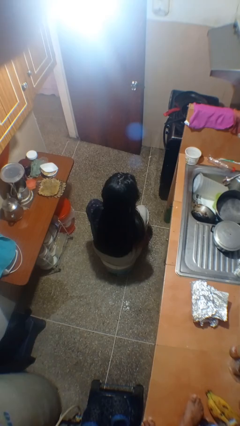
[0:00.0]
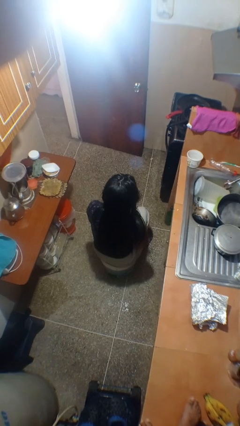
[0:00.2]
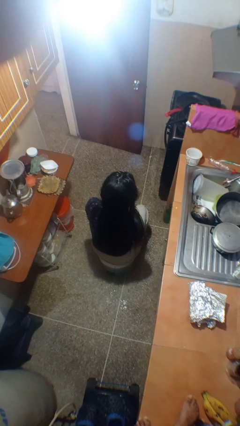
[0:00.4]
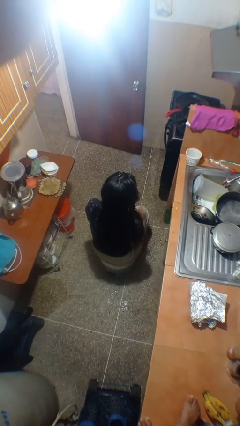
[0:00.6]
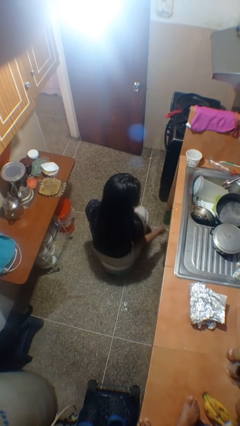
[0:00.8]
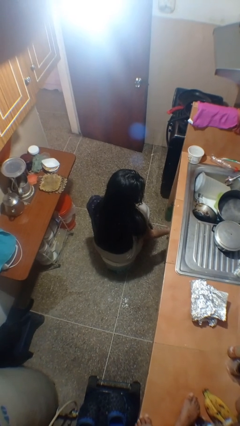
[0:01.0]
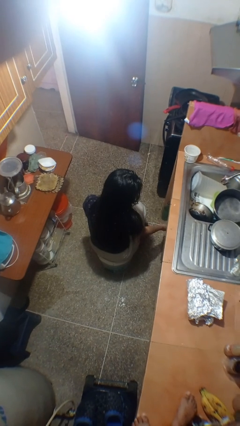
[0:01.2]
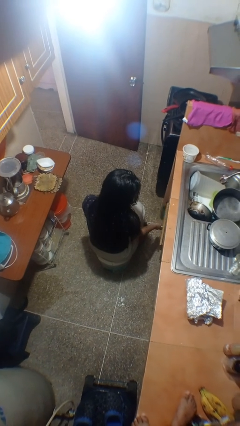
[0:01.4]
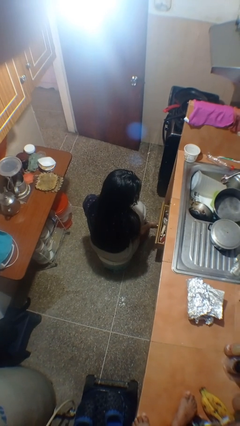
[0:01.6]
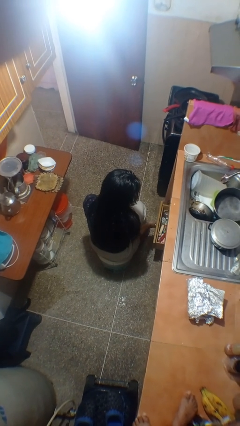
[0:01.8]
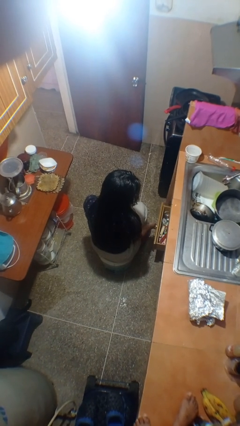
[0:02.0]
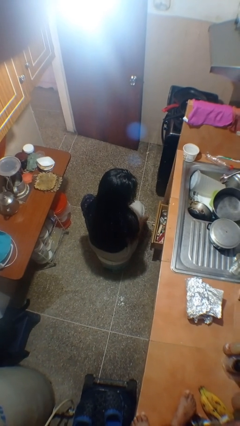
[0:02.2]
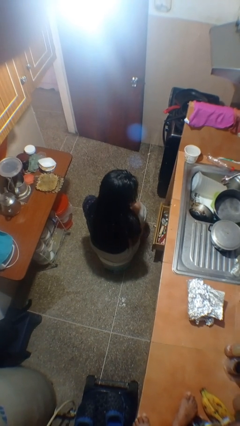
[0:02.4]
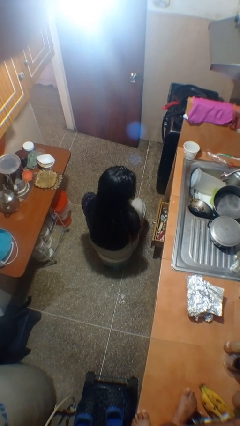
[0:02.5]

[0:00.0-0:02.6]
person opens kitchen drawer

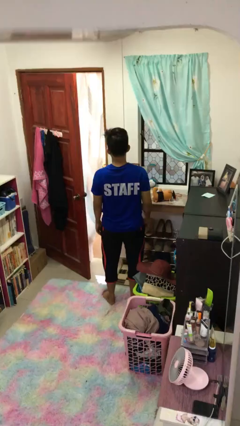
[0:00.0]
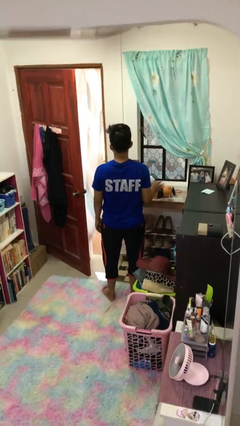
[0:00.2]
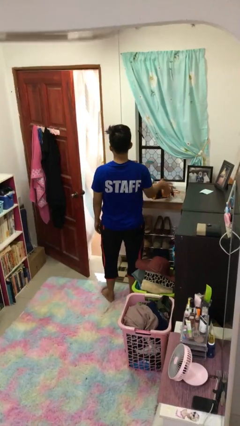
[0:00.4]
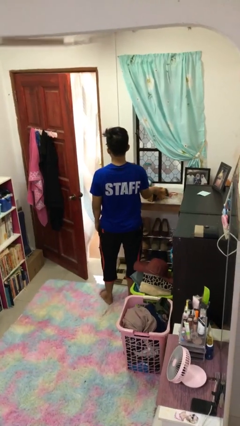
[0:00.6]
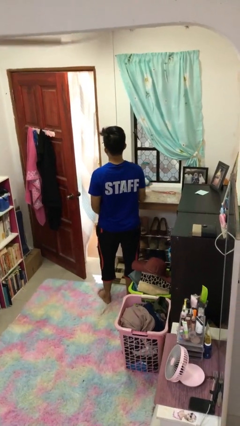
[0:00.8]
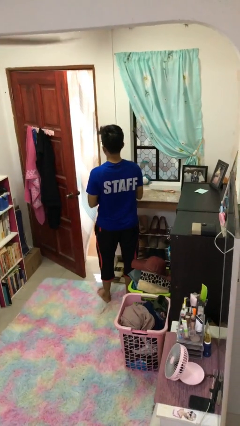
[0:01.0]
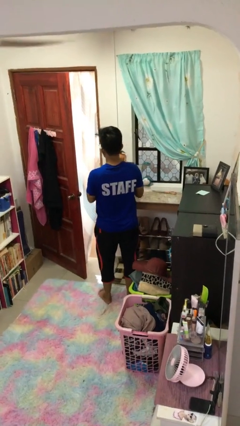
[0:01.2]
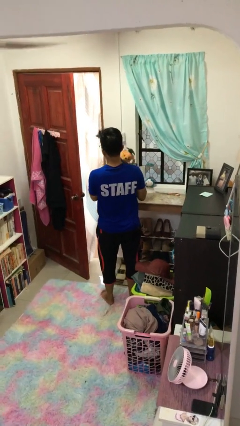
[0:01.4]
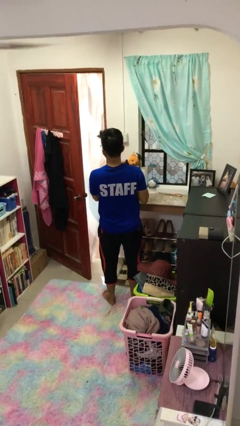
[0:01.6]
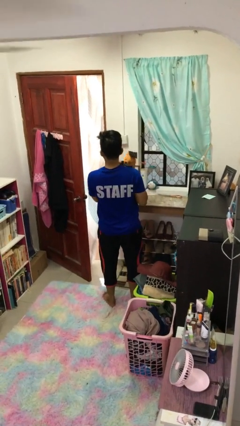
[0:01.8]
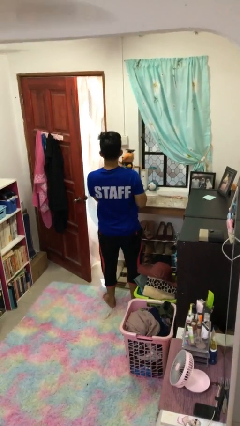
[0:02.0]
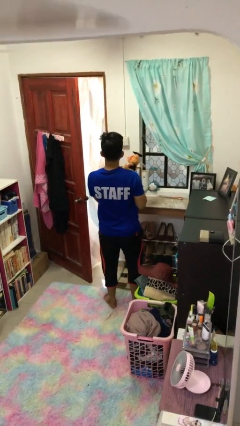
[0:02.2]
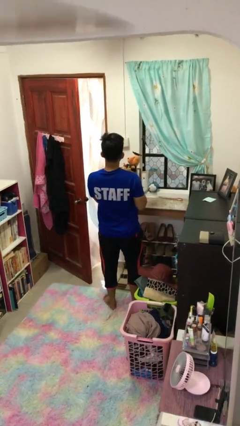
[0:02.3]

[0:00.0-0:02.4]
person picks up object from countertop

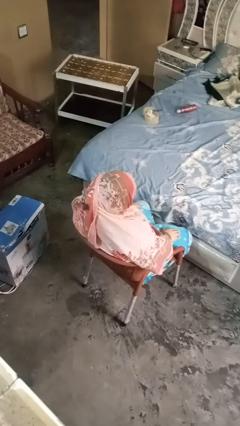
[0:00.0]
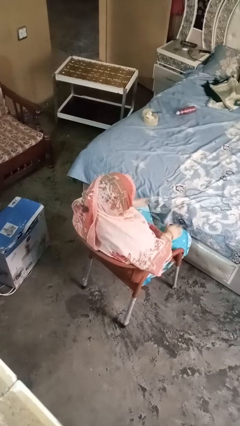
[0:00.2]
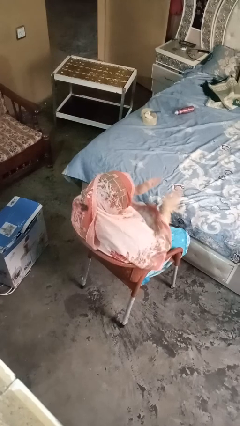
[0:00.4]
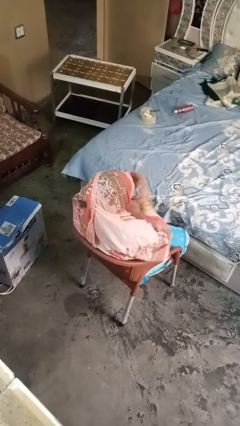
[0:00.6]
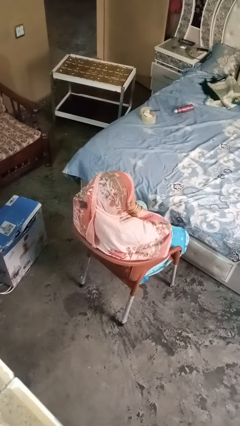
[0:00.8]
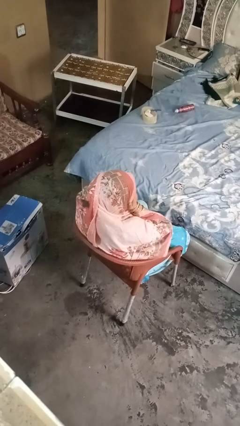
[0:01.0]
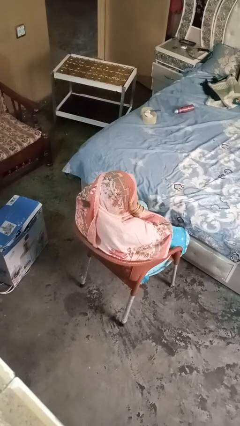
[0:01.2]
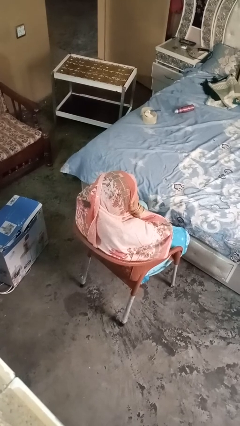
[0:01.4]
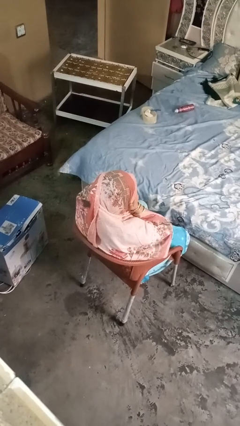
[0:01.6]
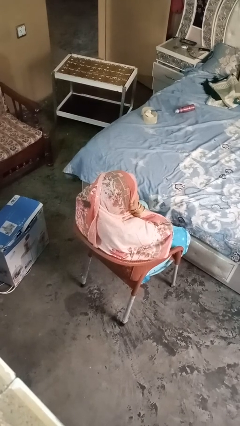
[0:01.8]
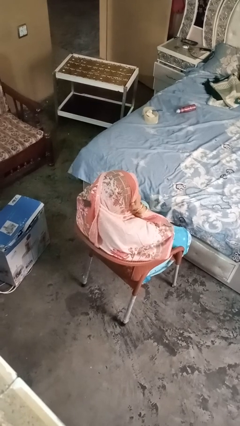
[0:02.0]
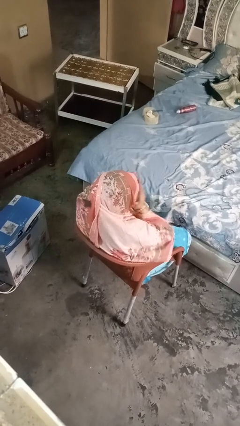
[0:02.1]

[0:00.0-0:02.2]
person covers face with hands

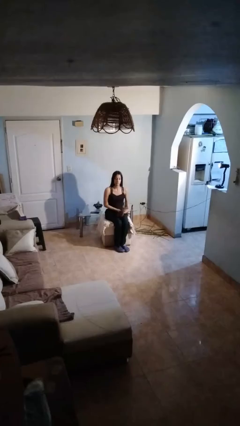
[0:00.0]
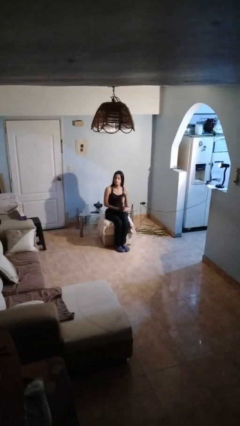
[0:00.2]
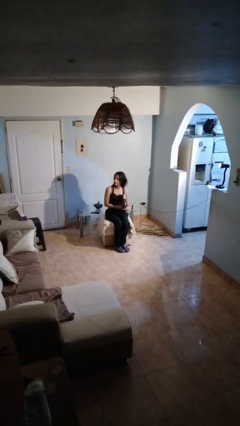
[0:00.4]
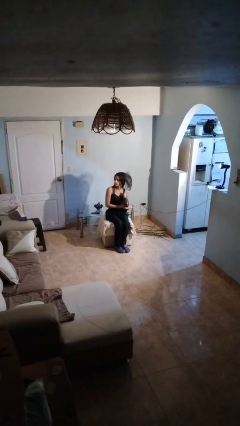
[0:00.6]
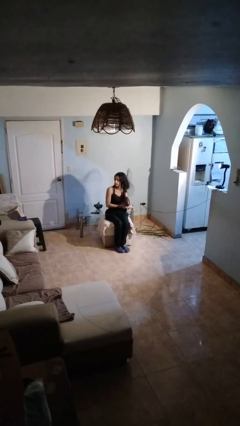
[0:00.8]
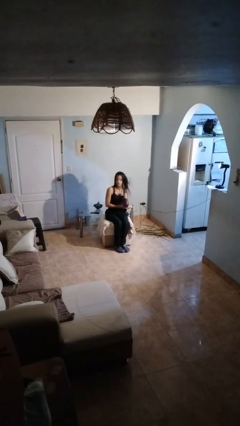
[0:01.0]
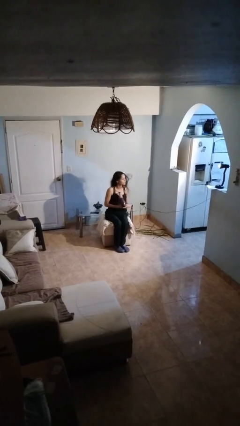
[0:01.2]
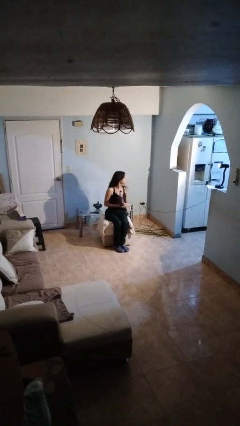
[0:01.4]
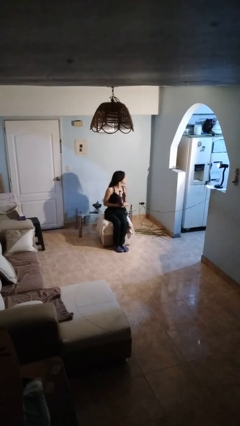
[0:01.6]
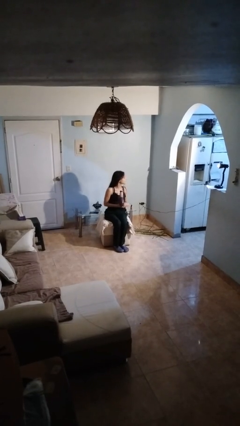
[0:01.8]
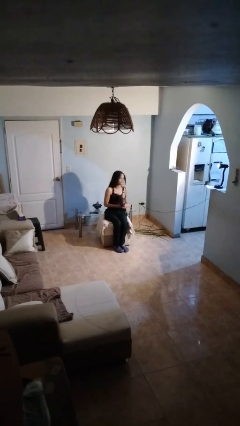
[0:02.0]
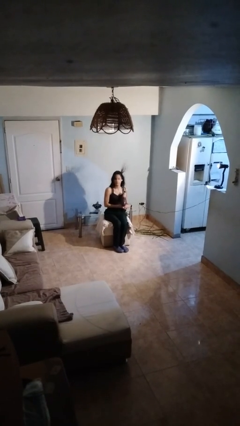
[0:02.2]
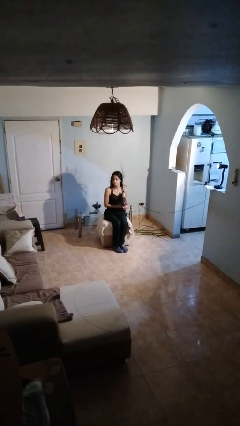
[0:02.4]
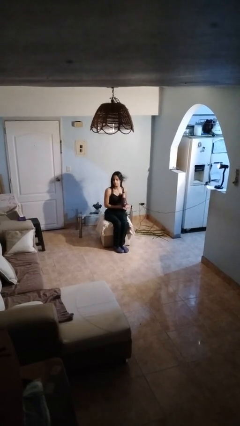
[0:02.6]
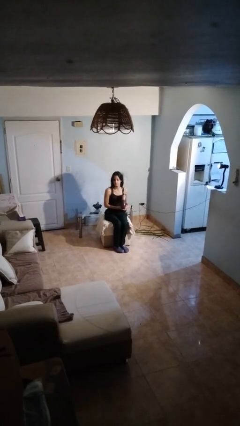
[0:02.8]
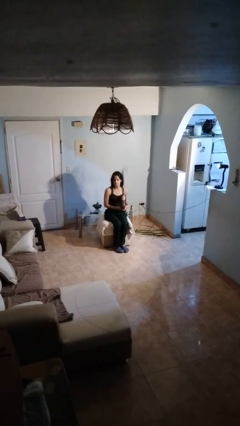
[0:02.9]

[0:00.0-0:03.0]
person dries hair with hairdryer

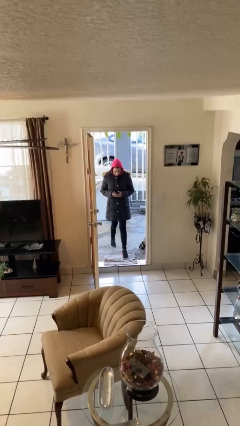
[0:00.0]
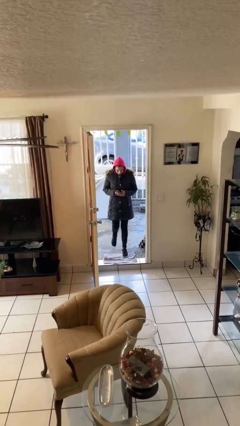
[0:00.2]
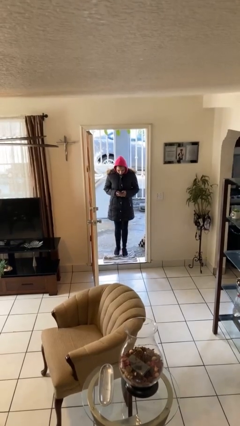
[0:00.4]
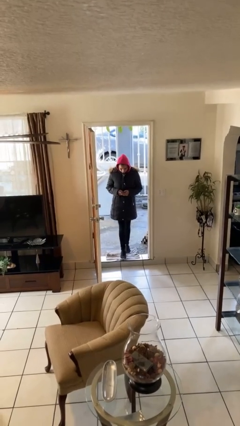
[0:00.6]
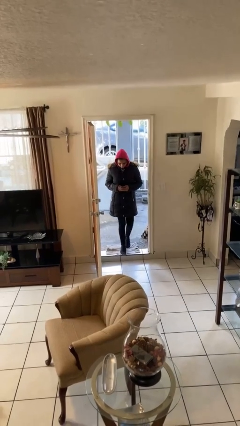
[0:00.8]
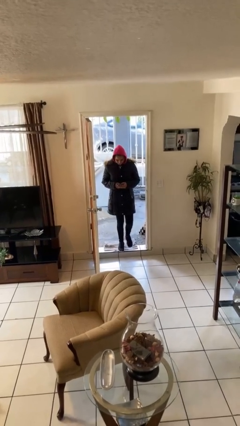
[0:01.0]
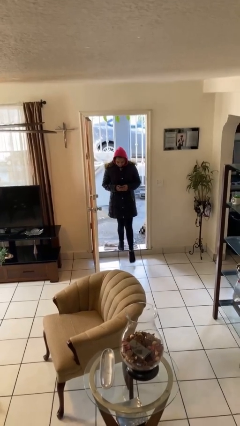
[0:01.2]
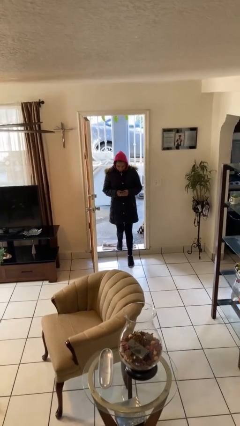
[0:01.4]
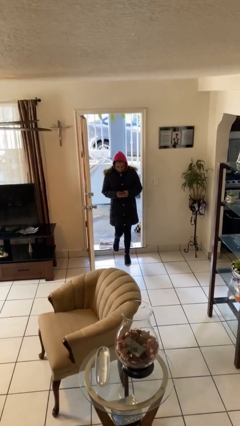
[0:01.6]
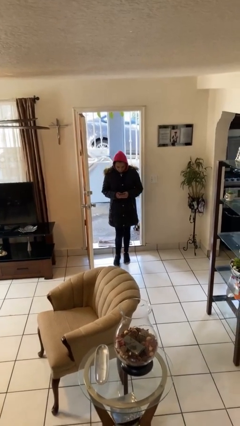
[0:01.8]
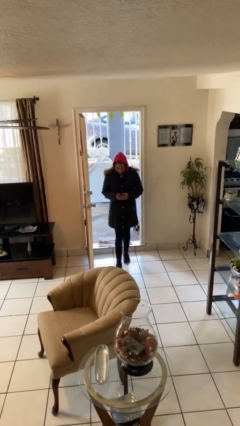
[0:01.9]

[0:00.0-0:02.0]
person enters scene through structure

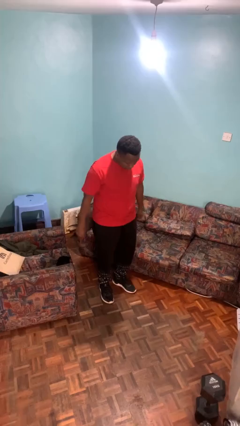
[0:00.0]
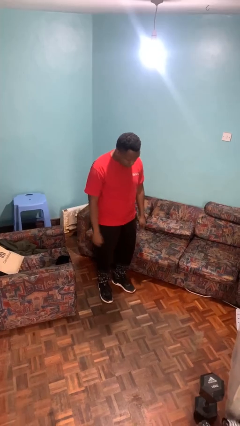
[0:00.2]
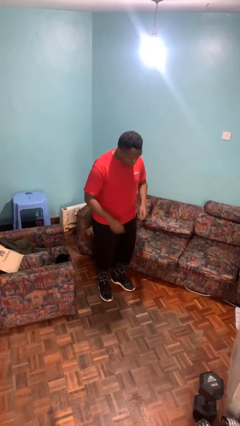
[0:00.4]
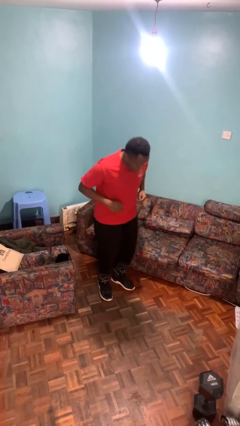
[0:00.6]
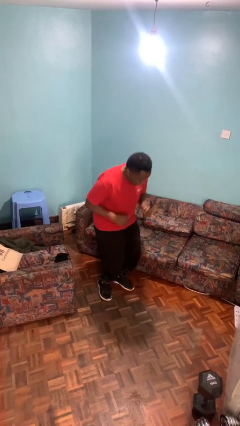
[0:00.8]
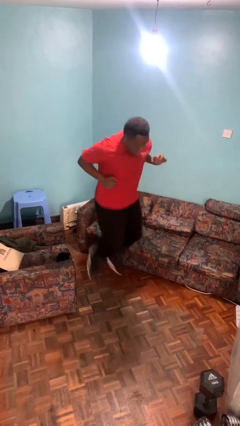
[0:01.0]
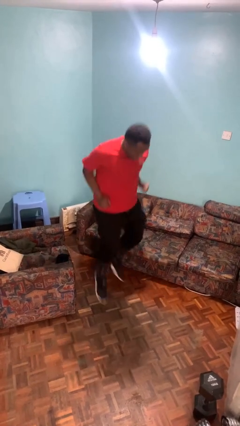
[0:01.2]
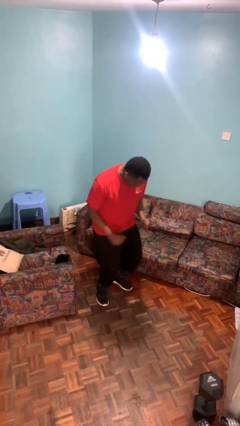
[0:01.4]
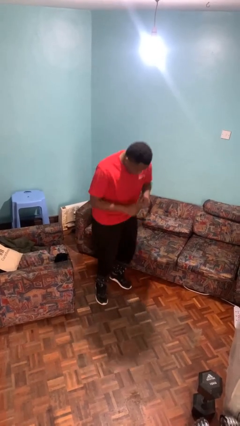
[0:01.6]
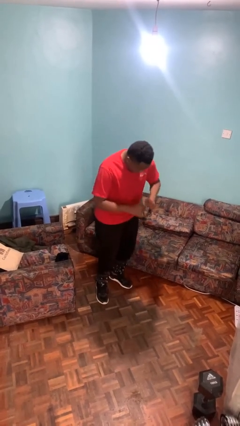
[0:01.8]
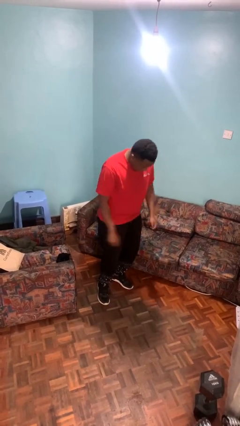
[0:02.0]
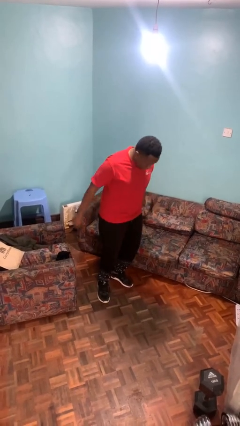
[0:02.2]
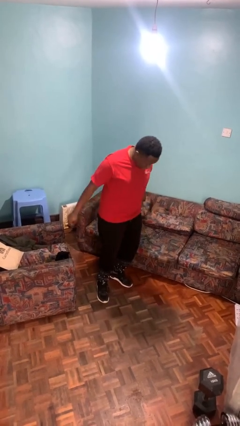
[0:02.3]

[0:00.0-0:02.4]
person jumps

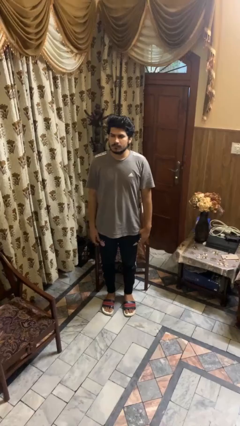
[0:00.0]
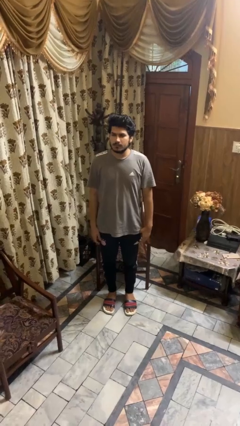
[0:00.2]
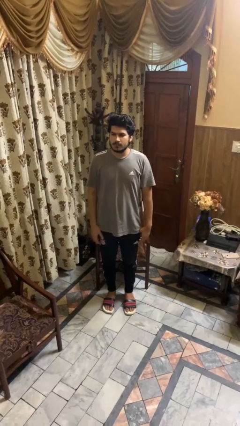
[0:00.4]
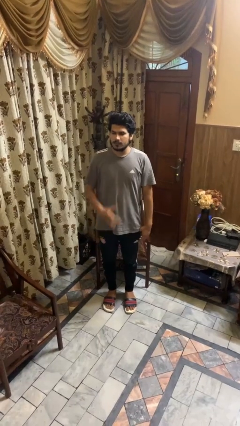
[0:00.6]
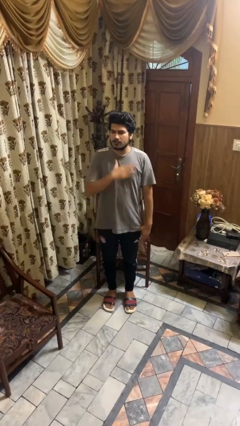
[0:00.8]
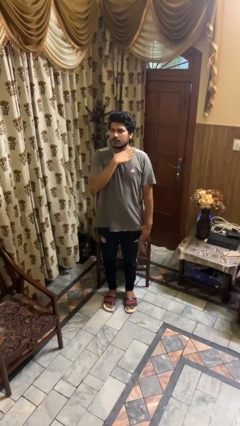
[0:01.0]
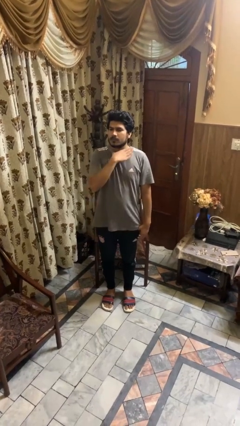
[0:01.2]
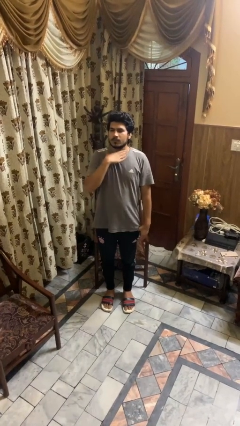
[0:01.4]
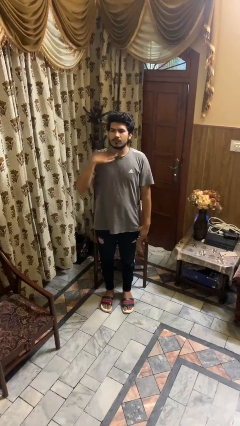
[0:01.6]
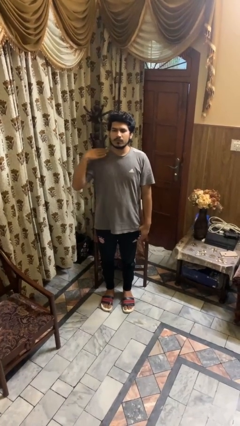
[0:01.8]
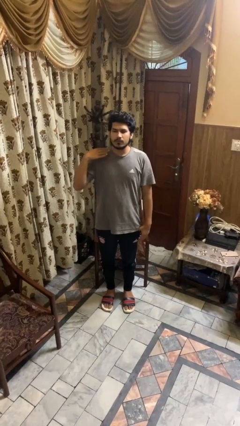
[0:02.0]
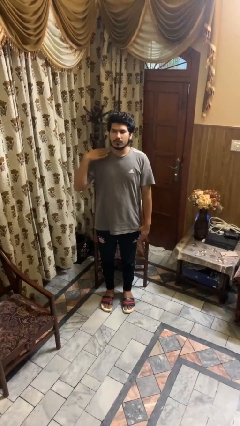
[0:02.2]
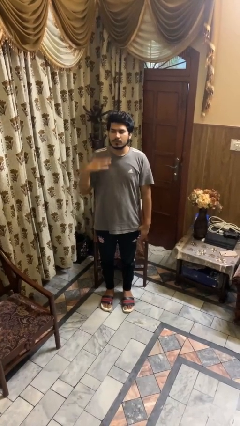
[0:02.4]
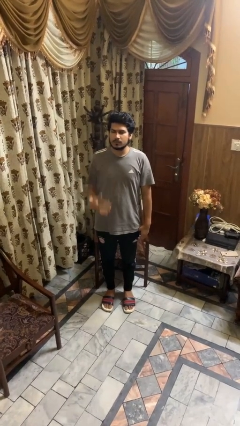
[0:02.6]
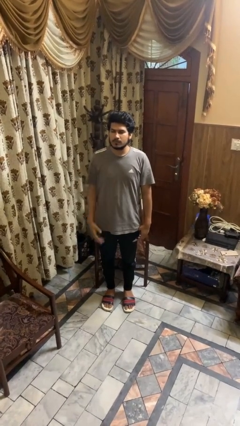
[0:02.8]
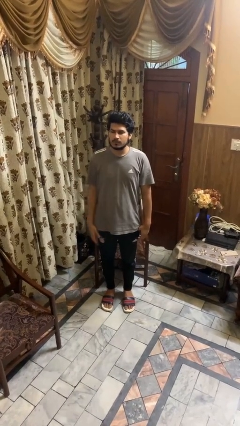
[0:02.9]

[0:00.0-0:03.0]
person gestures cut
